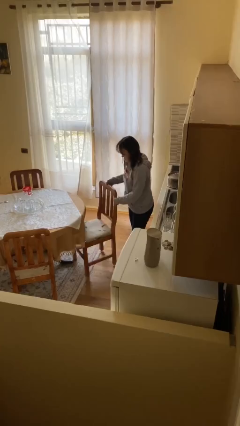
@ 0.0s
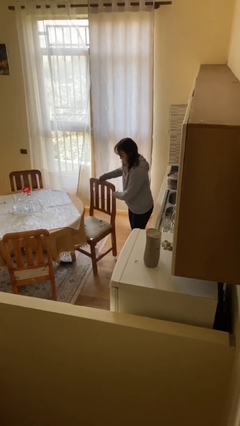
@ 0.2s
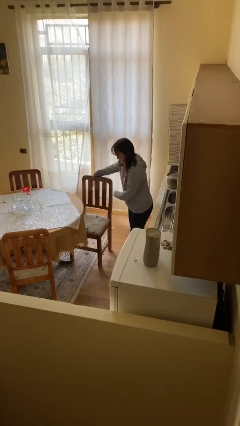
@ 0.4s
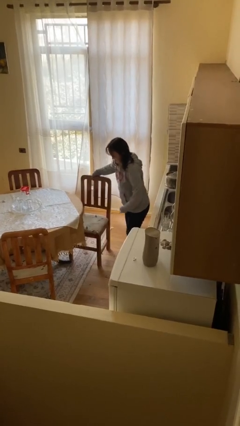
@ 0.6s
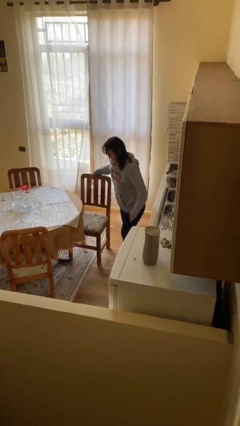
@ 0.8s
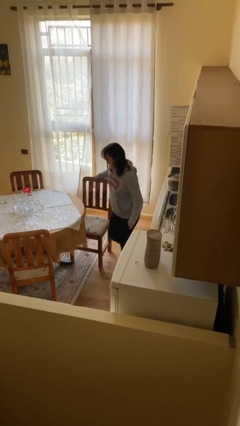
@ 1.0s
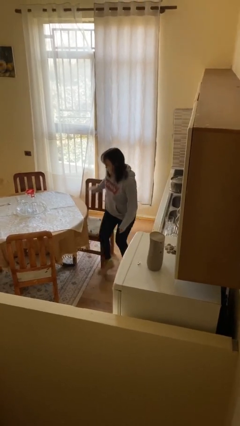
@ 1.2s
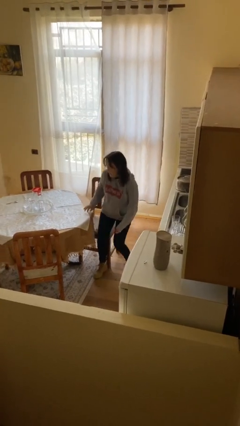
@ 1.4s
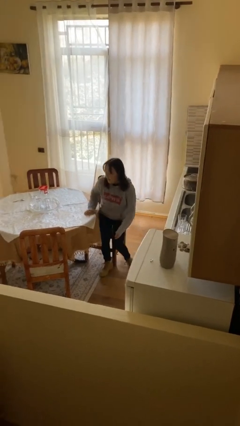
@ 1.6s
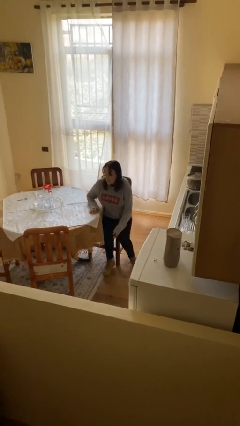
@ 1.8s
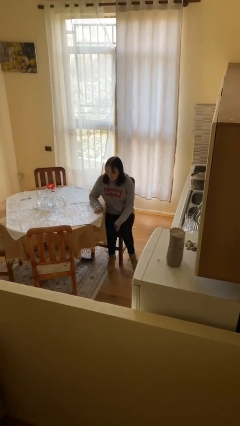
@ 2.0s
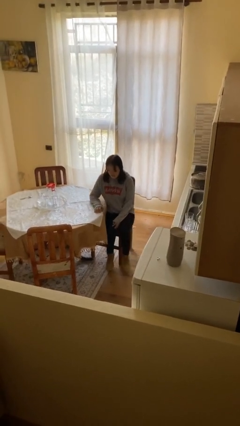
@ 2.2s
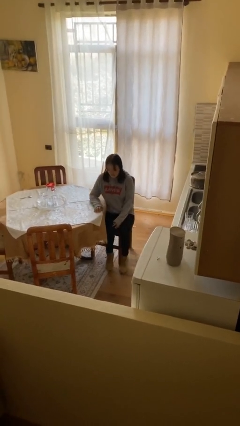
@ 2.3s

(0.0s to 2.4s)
person sits down

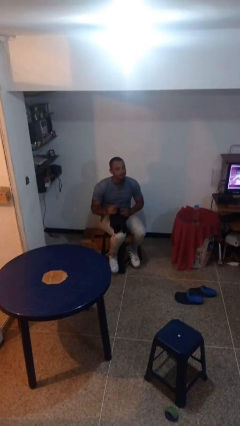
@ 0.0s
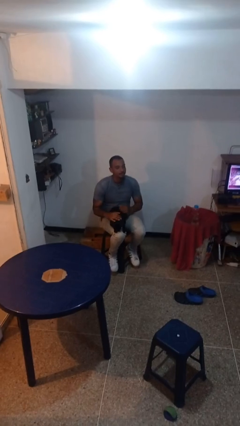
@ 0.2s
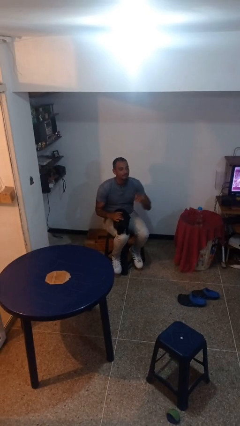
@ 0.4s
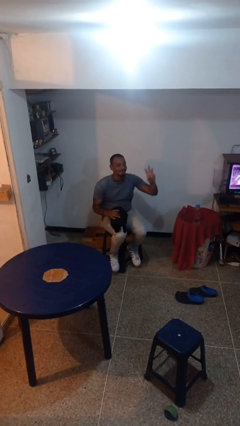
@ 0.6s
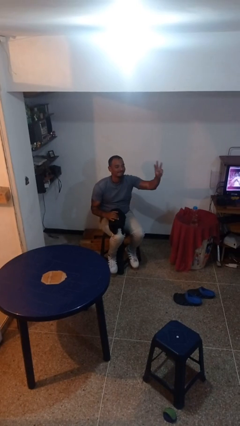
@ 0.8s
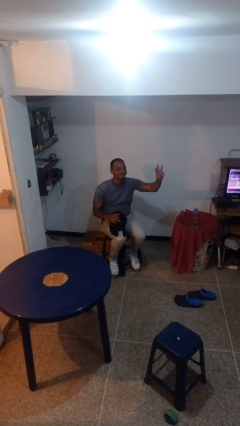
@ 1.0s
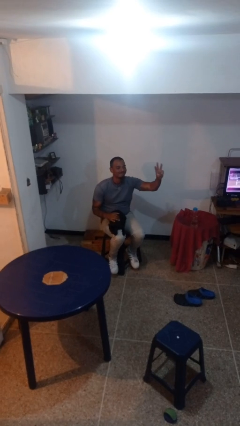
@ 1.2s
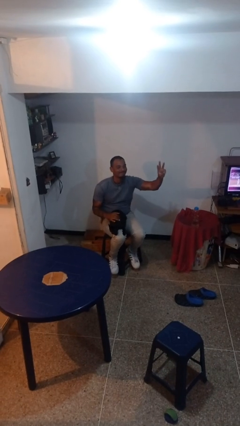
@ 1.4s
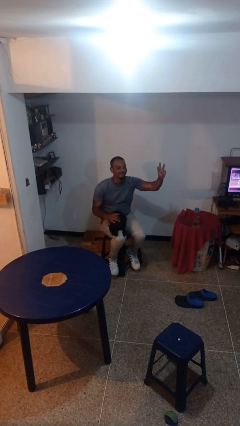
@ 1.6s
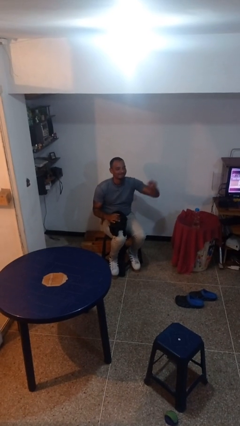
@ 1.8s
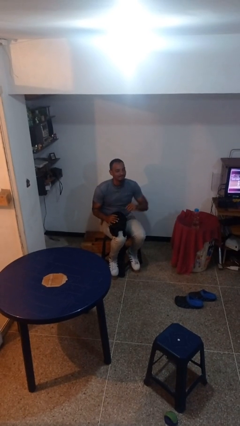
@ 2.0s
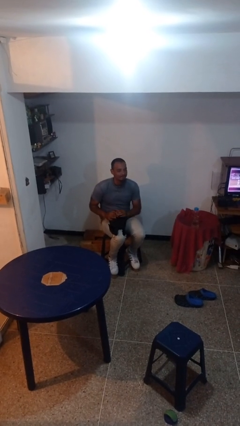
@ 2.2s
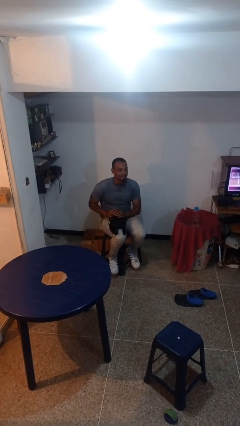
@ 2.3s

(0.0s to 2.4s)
person gestures number three

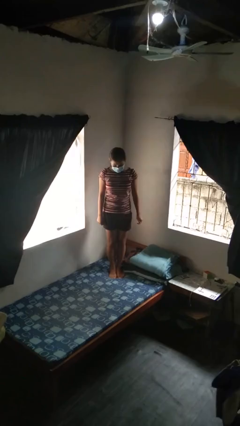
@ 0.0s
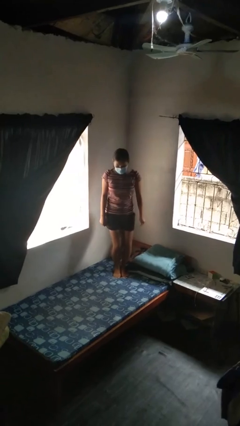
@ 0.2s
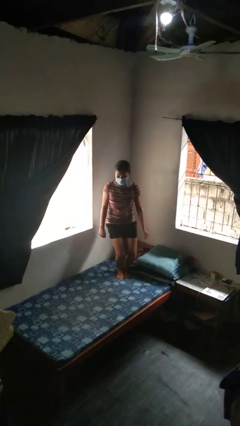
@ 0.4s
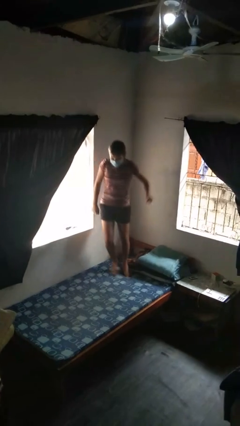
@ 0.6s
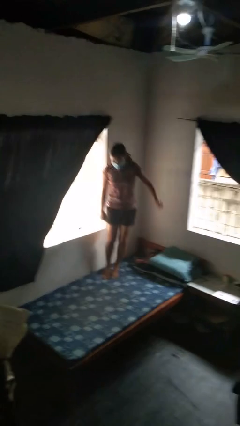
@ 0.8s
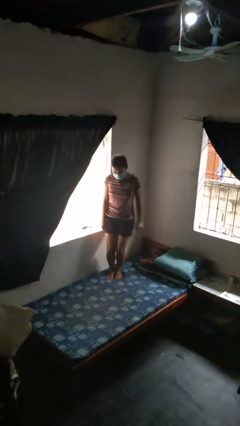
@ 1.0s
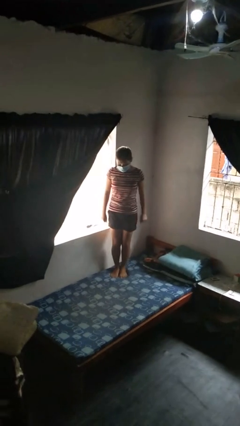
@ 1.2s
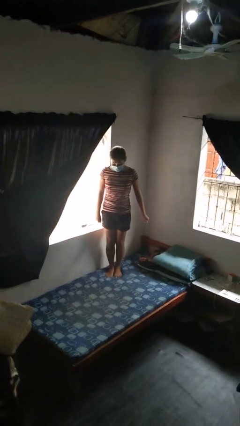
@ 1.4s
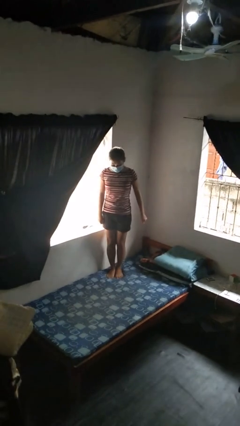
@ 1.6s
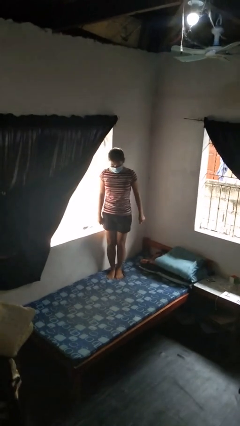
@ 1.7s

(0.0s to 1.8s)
person jumps on bed

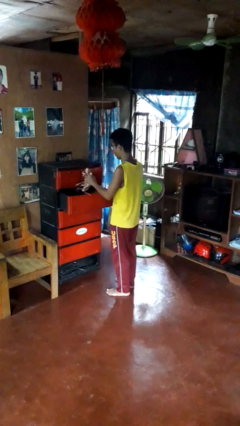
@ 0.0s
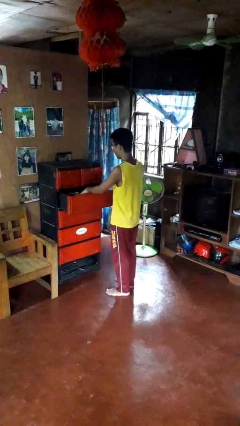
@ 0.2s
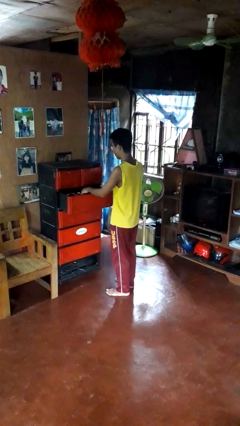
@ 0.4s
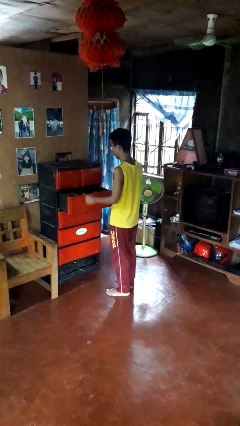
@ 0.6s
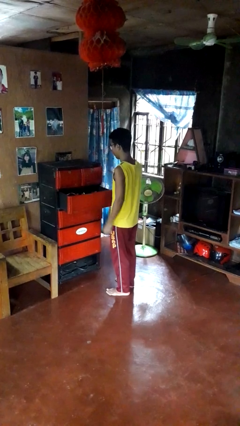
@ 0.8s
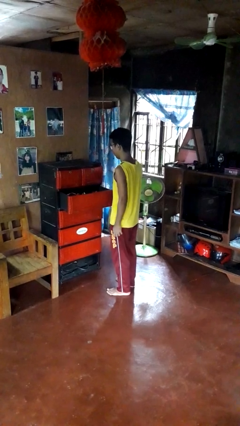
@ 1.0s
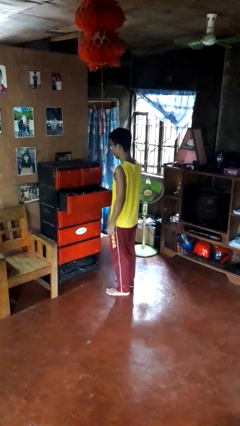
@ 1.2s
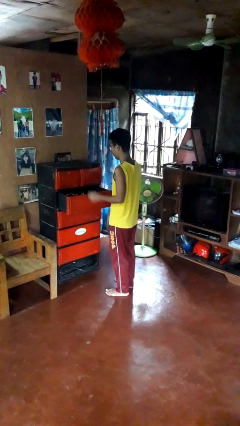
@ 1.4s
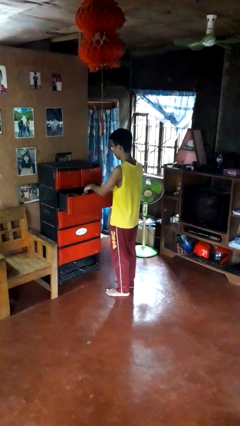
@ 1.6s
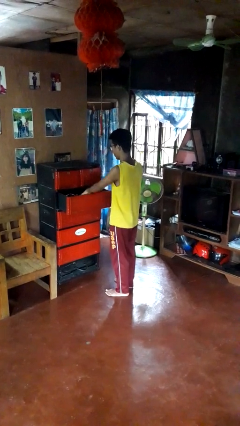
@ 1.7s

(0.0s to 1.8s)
person puts clothes into dresser

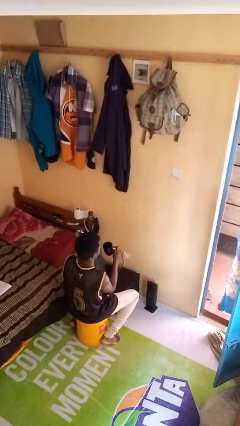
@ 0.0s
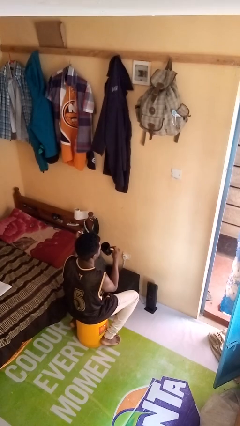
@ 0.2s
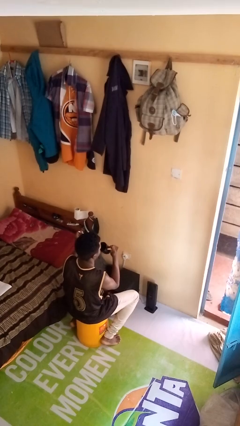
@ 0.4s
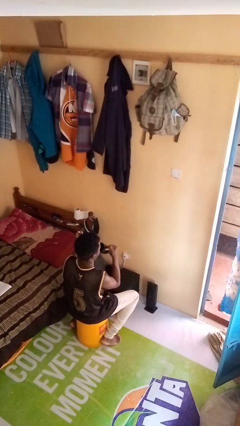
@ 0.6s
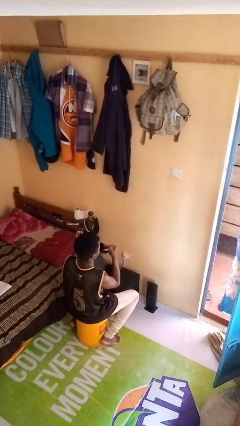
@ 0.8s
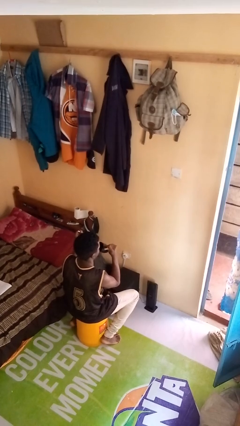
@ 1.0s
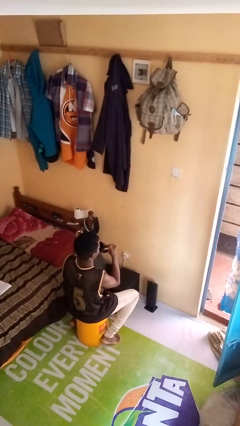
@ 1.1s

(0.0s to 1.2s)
person drinks from mug

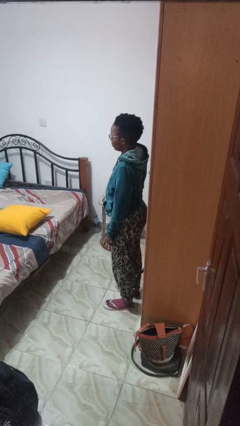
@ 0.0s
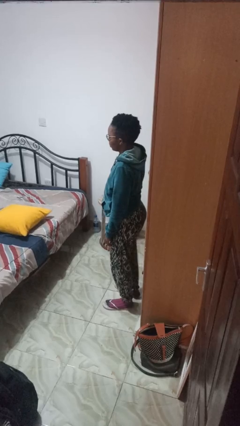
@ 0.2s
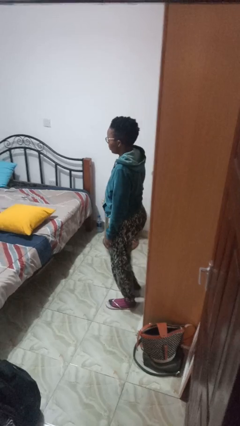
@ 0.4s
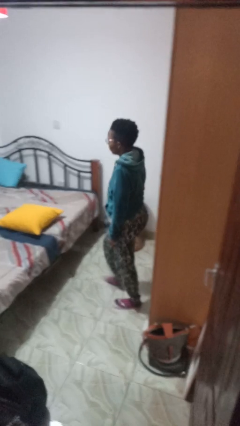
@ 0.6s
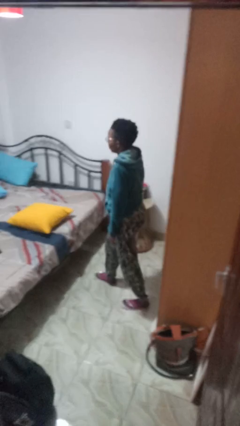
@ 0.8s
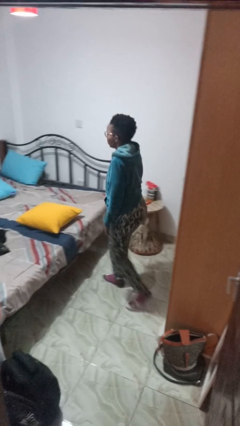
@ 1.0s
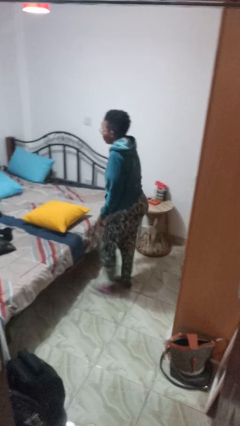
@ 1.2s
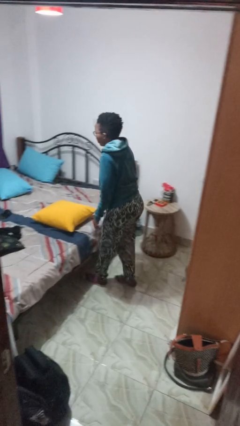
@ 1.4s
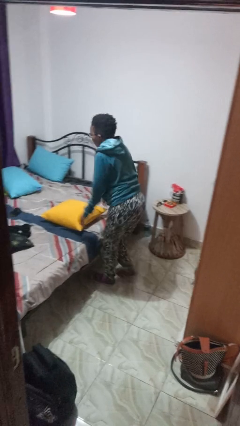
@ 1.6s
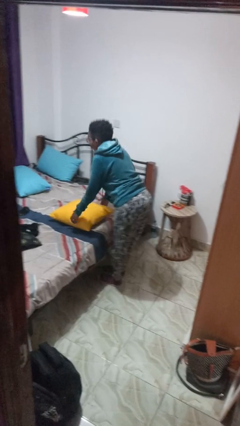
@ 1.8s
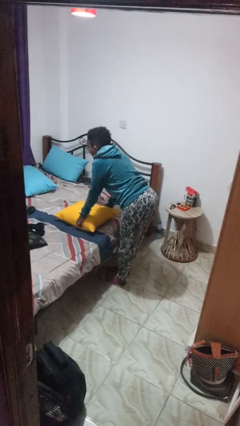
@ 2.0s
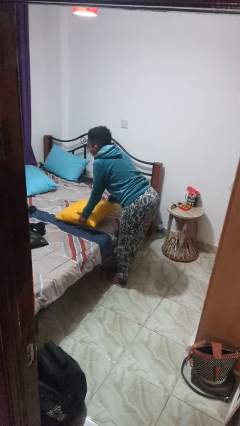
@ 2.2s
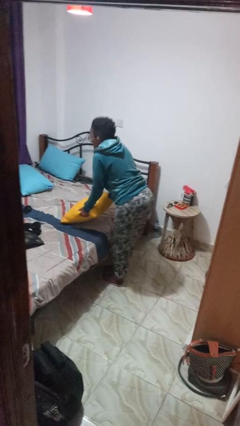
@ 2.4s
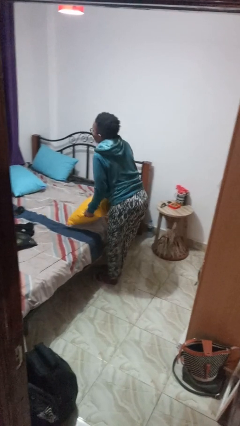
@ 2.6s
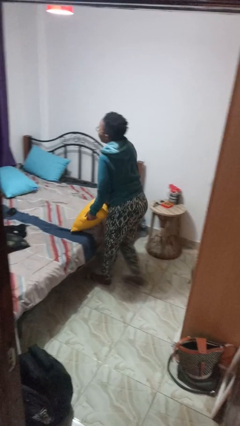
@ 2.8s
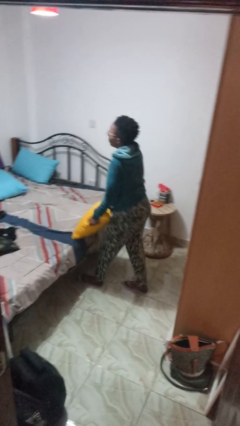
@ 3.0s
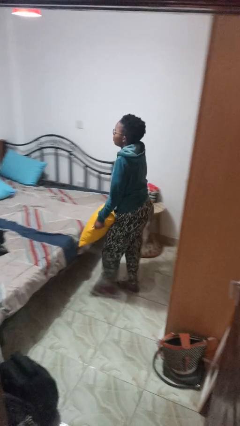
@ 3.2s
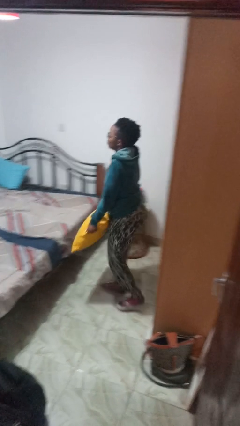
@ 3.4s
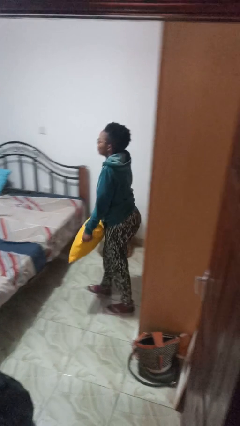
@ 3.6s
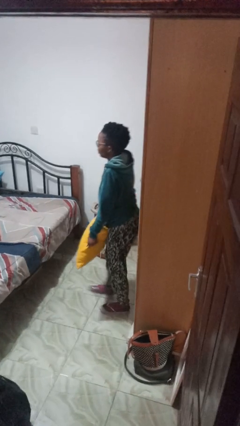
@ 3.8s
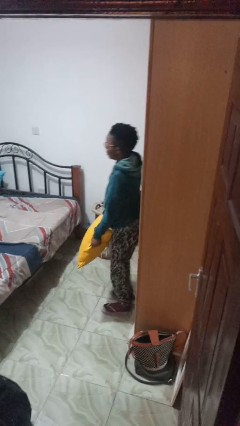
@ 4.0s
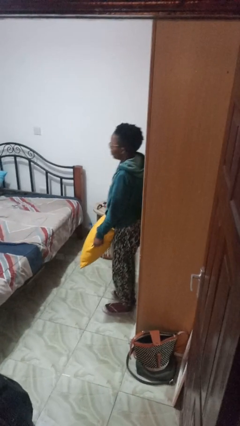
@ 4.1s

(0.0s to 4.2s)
person picks up object from bed

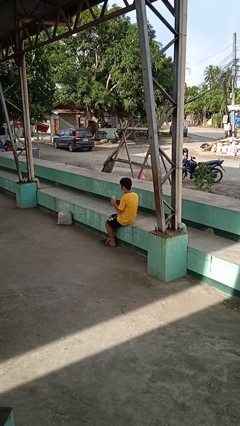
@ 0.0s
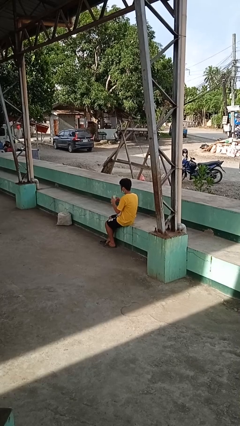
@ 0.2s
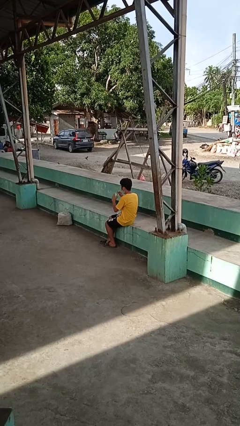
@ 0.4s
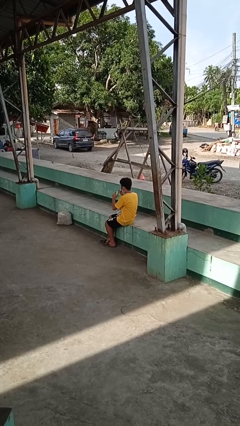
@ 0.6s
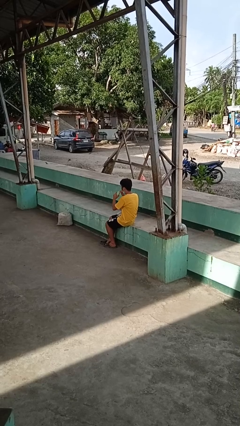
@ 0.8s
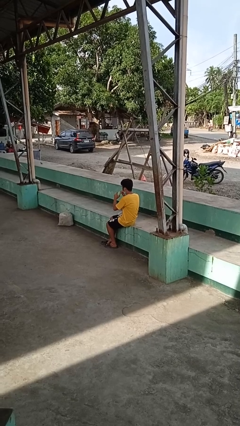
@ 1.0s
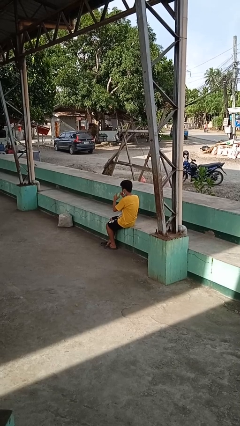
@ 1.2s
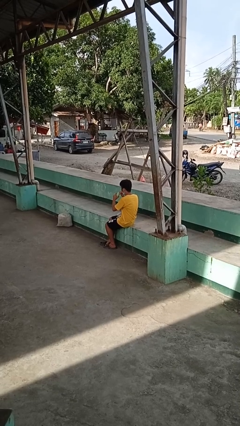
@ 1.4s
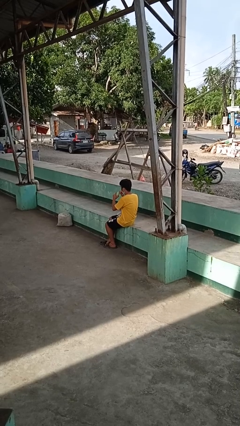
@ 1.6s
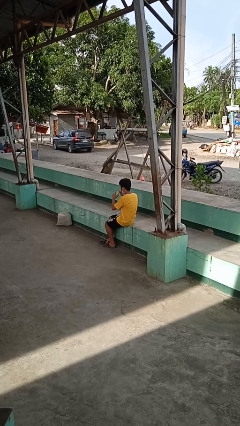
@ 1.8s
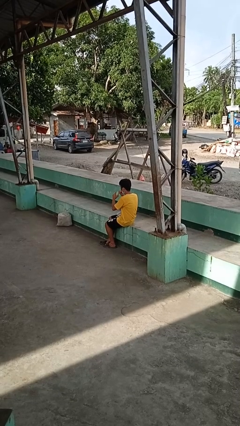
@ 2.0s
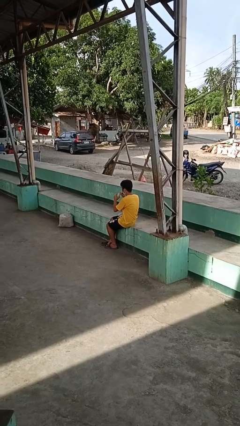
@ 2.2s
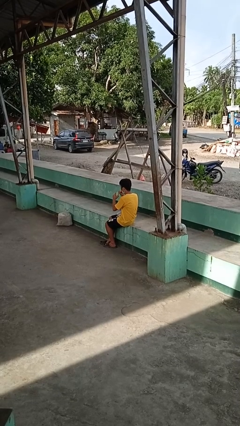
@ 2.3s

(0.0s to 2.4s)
person drinks from straw

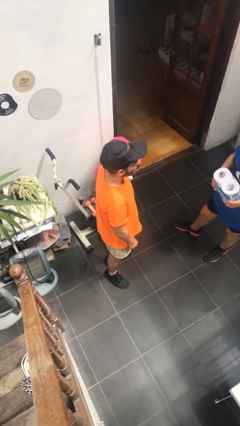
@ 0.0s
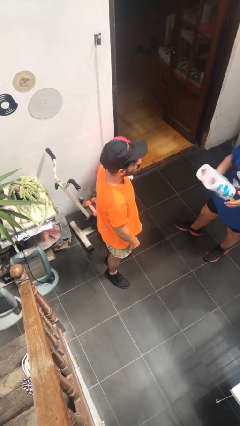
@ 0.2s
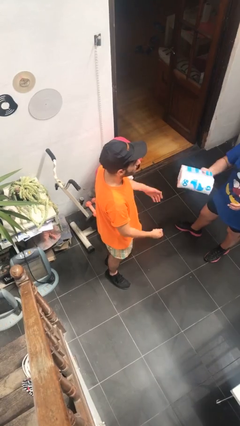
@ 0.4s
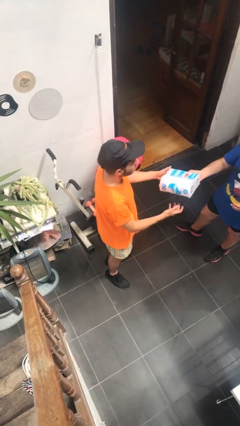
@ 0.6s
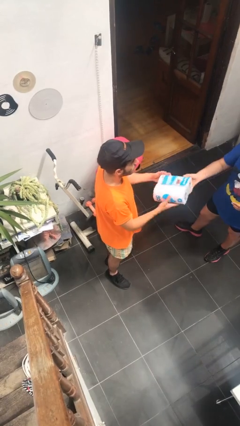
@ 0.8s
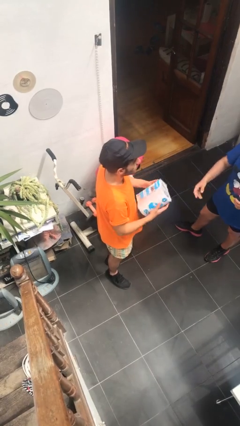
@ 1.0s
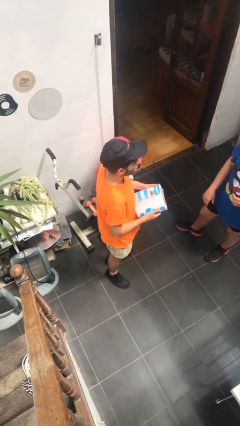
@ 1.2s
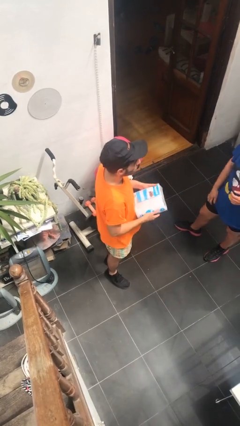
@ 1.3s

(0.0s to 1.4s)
person transfers object to person
